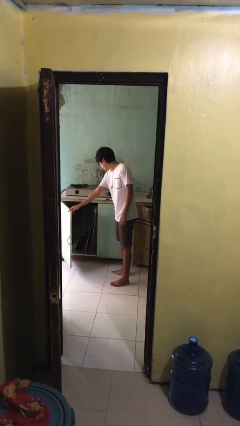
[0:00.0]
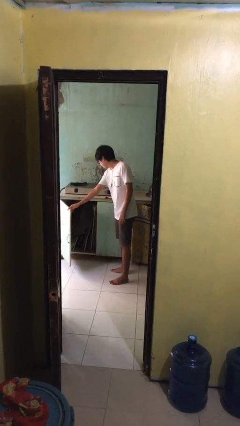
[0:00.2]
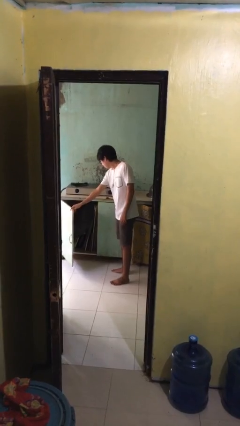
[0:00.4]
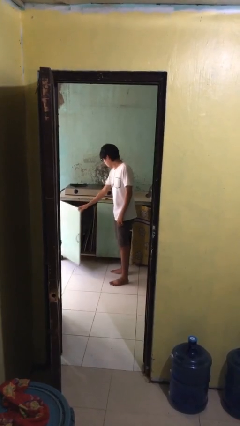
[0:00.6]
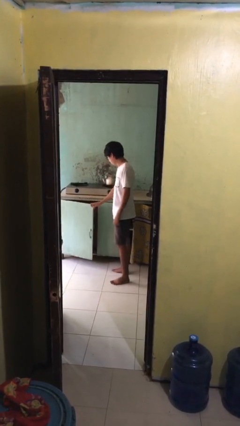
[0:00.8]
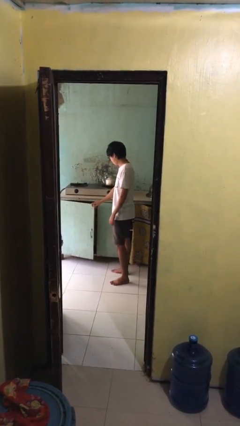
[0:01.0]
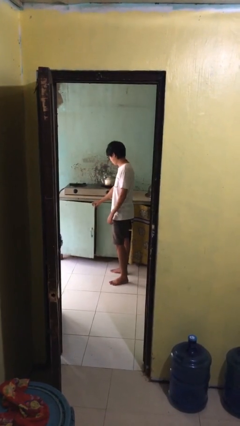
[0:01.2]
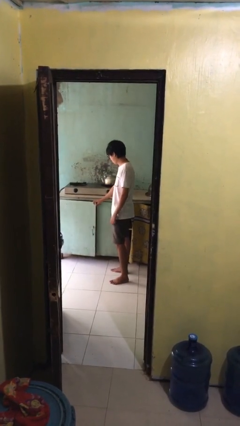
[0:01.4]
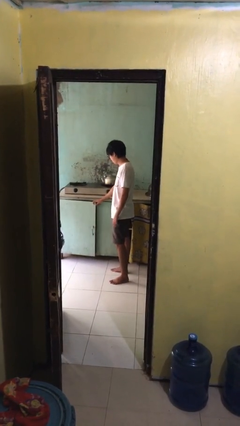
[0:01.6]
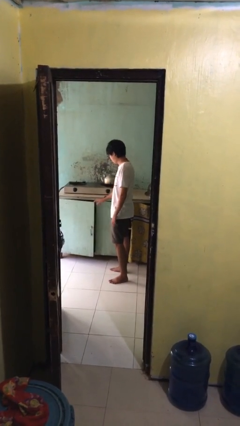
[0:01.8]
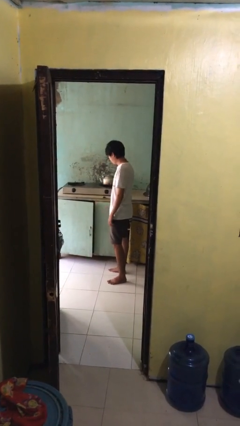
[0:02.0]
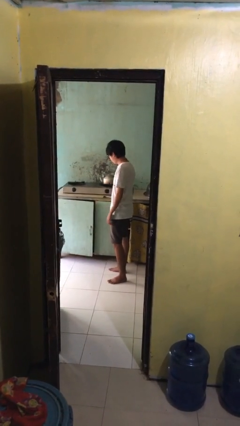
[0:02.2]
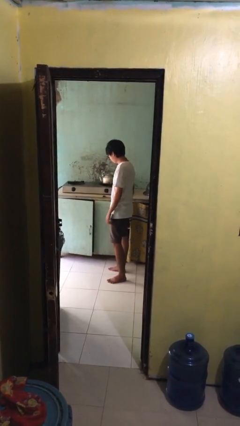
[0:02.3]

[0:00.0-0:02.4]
person closes cabinet

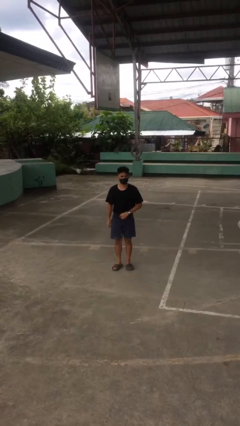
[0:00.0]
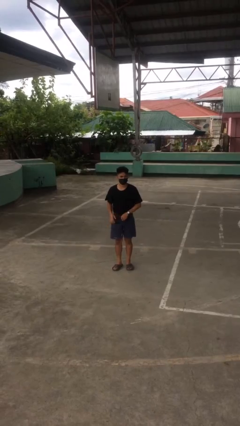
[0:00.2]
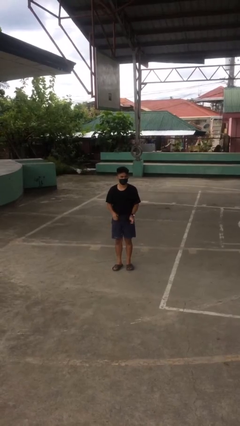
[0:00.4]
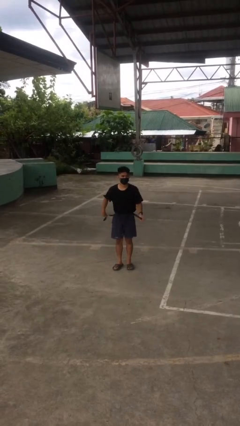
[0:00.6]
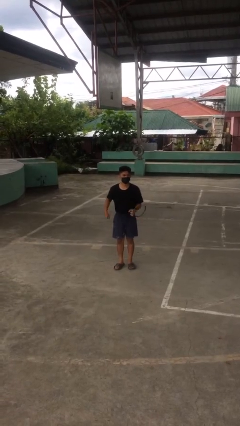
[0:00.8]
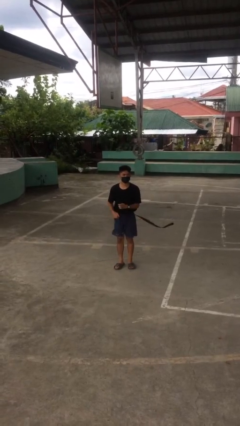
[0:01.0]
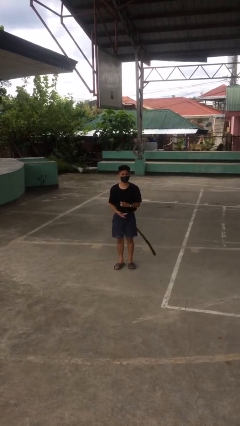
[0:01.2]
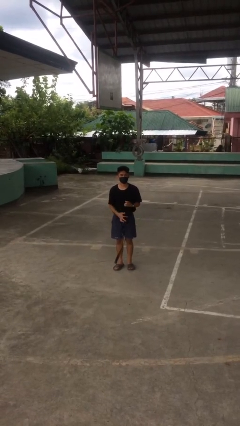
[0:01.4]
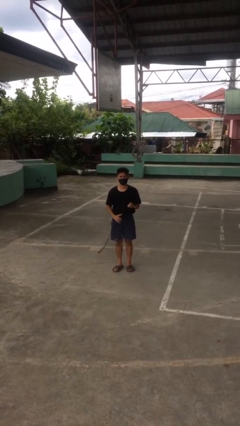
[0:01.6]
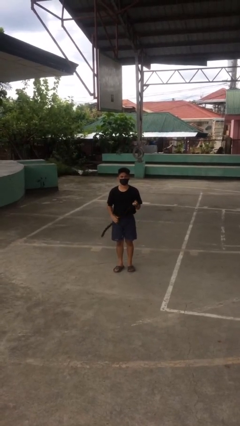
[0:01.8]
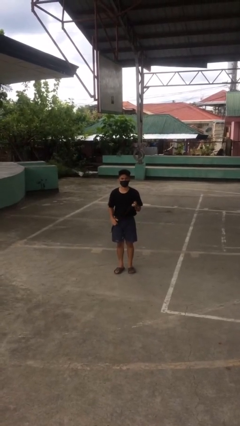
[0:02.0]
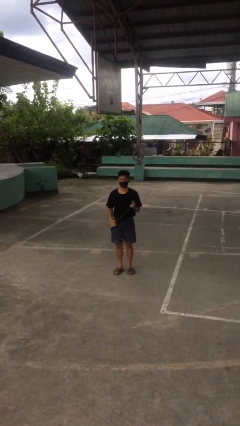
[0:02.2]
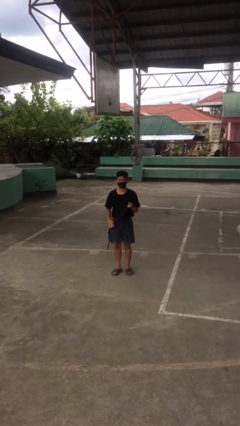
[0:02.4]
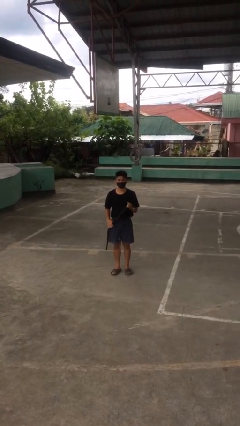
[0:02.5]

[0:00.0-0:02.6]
person takes off belt

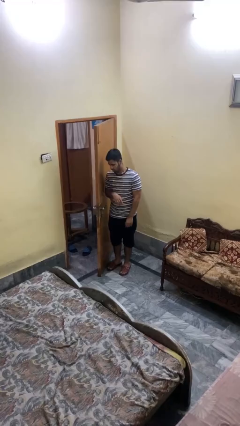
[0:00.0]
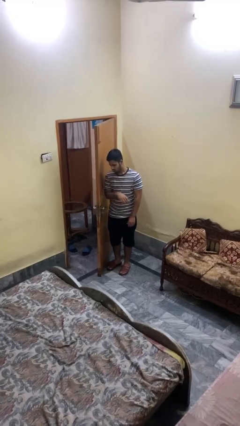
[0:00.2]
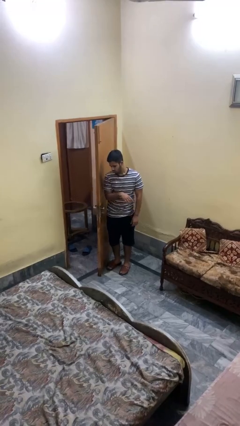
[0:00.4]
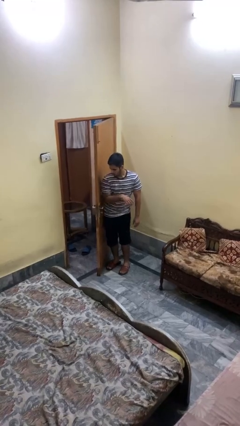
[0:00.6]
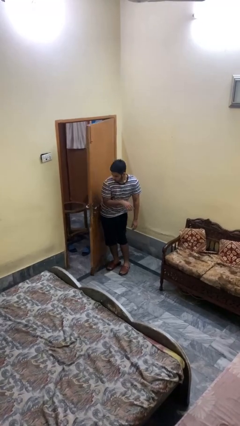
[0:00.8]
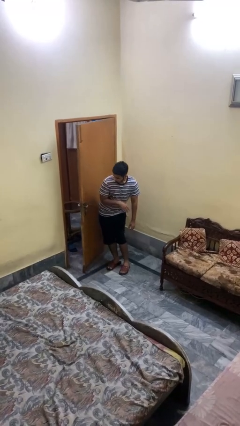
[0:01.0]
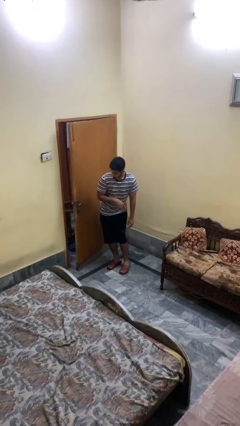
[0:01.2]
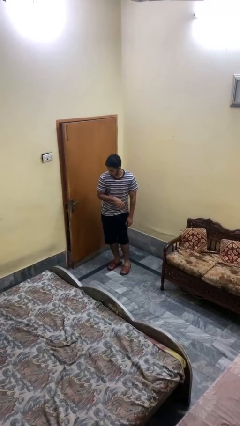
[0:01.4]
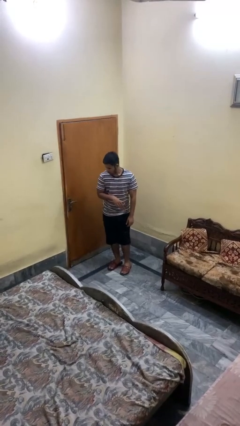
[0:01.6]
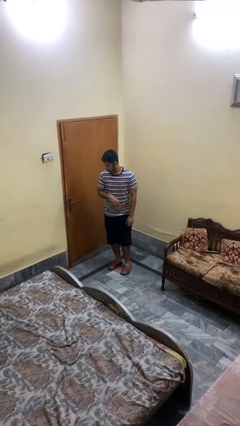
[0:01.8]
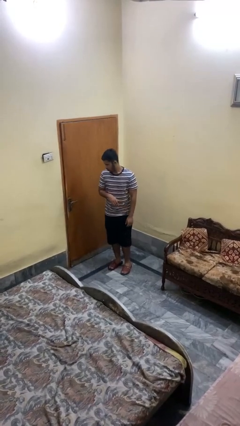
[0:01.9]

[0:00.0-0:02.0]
person closes door with hip

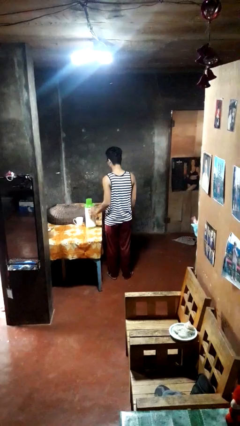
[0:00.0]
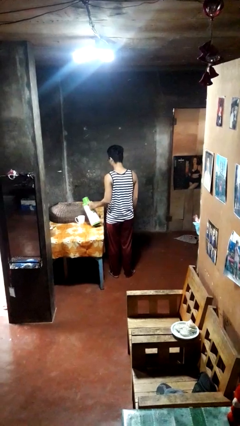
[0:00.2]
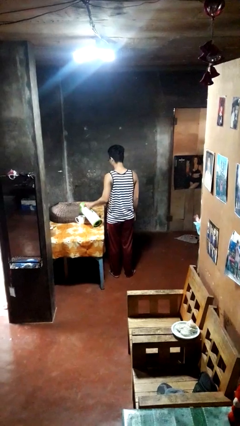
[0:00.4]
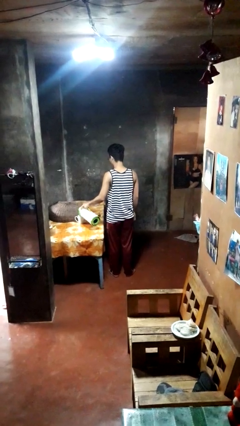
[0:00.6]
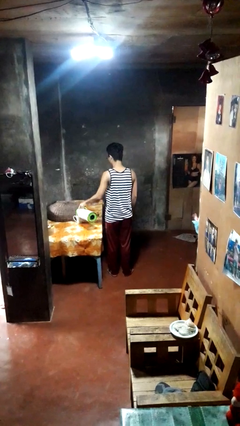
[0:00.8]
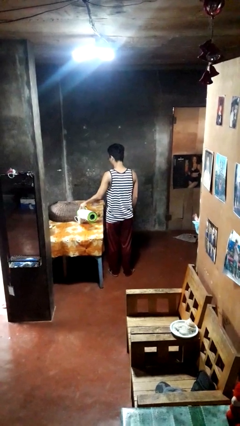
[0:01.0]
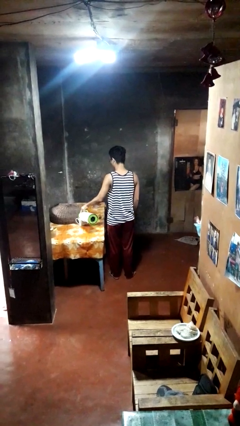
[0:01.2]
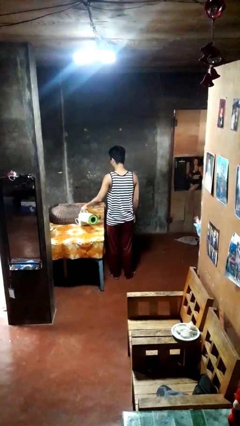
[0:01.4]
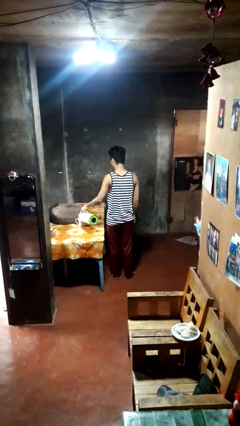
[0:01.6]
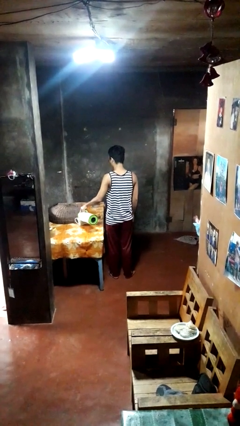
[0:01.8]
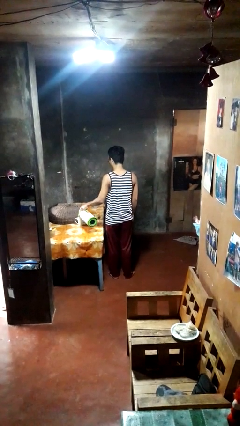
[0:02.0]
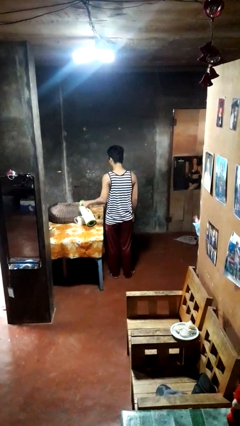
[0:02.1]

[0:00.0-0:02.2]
person pours coffee into mug

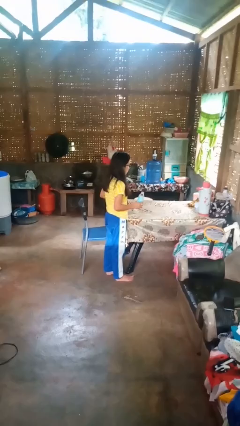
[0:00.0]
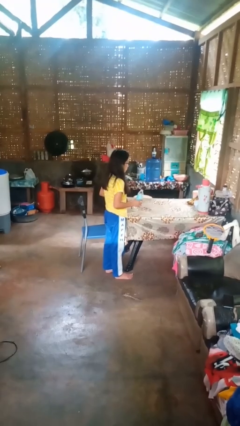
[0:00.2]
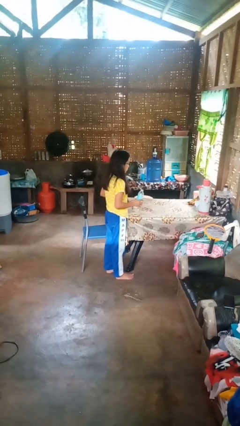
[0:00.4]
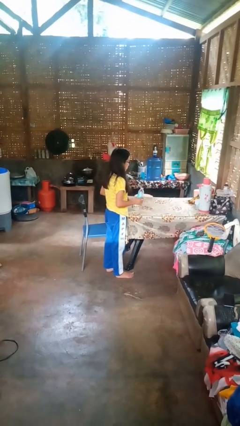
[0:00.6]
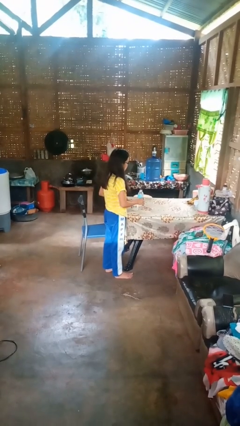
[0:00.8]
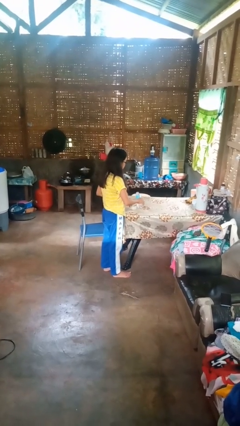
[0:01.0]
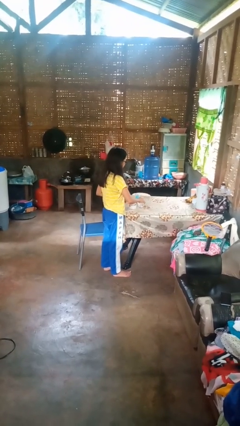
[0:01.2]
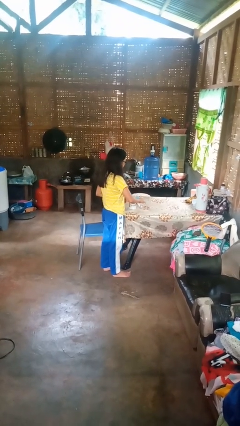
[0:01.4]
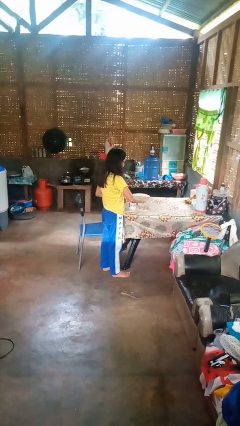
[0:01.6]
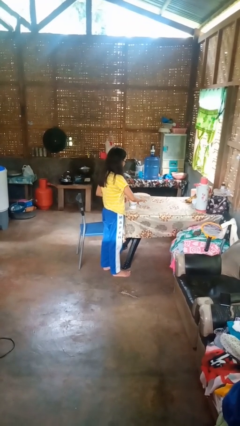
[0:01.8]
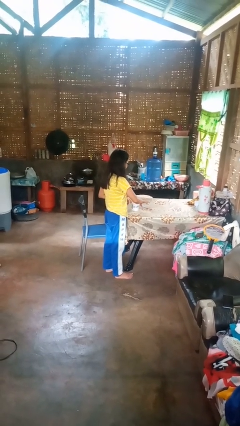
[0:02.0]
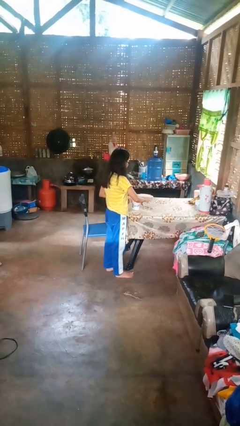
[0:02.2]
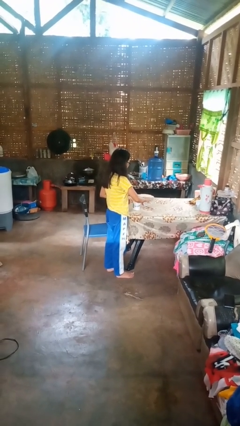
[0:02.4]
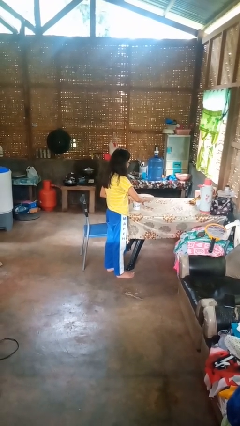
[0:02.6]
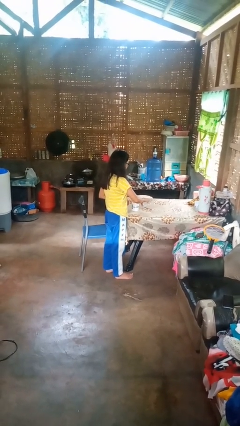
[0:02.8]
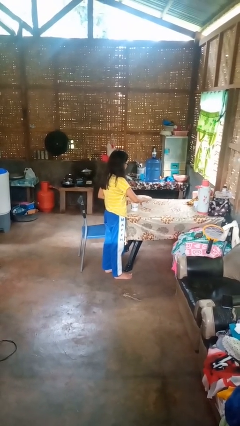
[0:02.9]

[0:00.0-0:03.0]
person pours liquid into cup

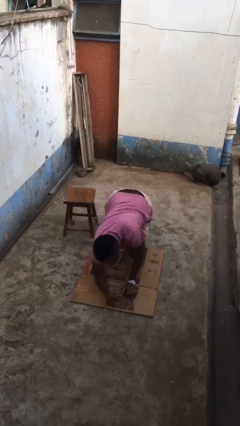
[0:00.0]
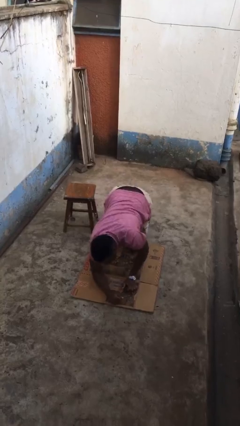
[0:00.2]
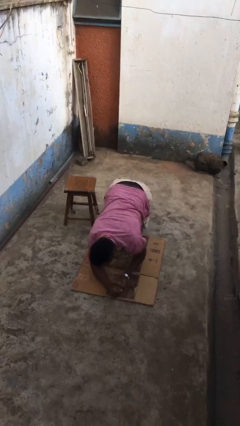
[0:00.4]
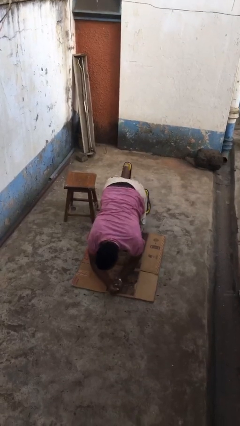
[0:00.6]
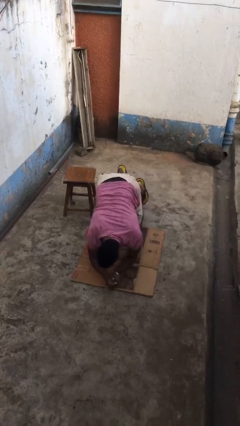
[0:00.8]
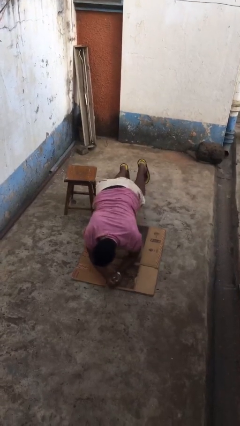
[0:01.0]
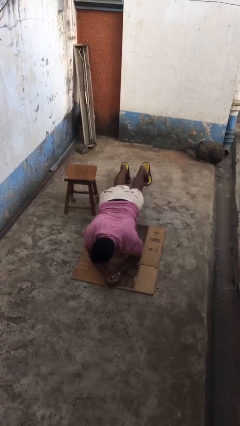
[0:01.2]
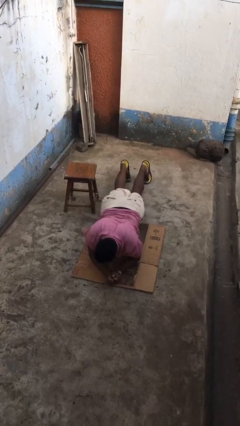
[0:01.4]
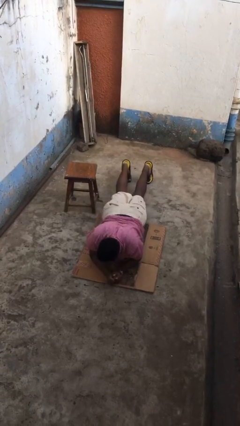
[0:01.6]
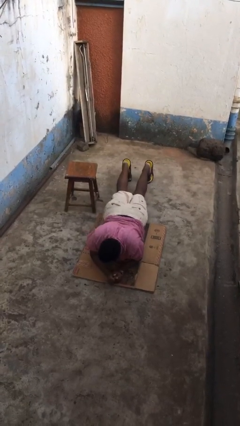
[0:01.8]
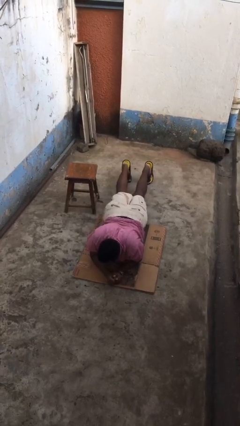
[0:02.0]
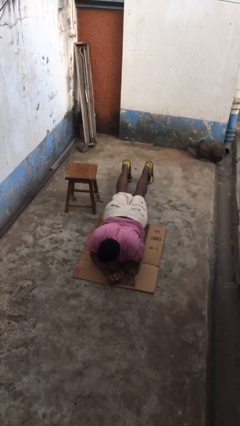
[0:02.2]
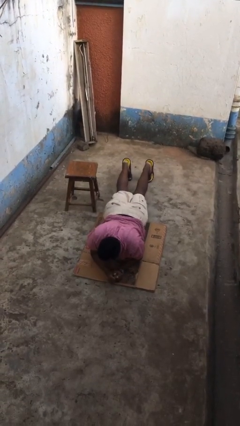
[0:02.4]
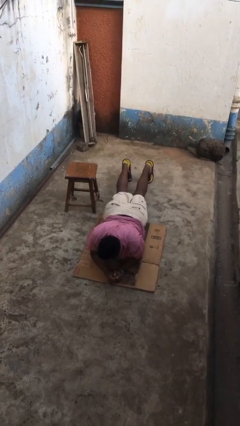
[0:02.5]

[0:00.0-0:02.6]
person lies down on floor

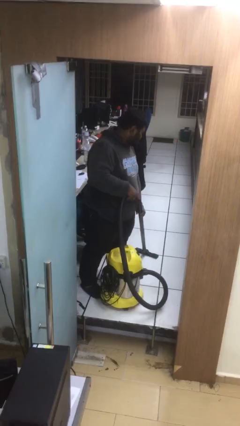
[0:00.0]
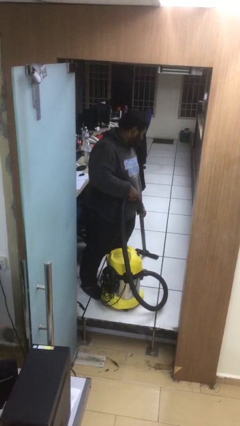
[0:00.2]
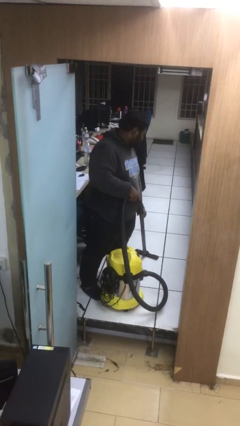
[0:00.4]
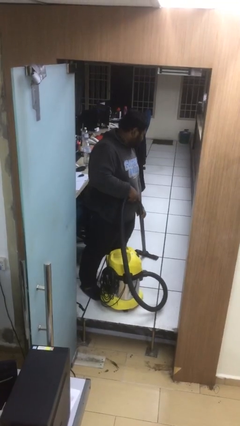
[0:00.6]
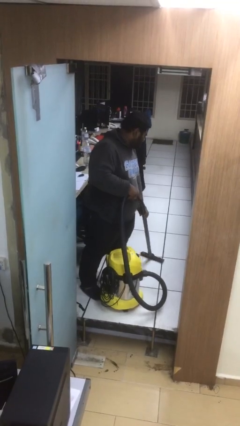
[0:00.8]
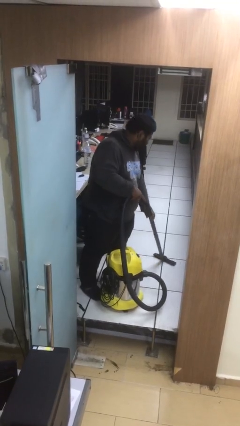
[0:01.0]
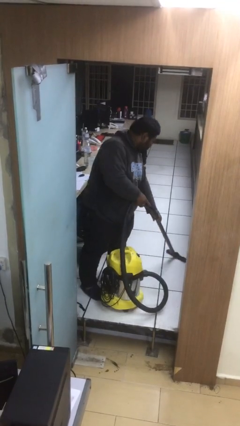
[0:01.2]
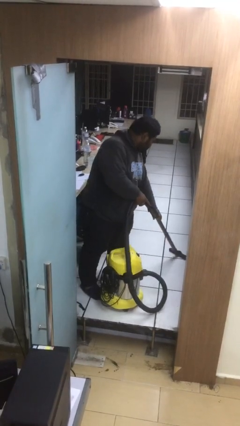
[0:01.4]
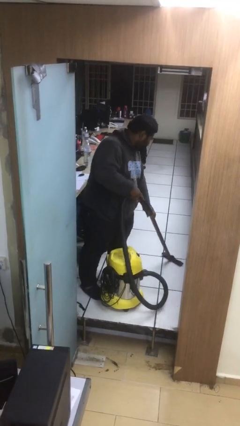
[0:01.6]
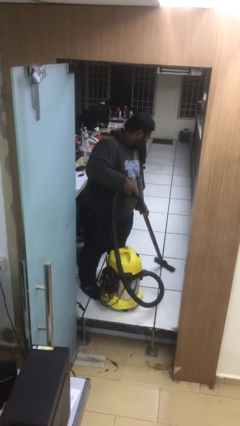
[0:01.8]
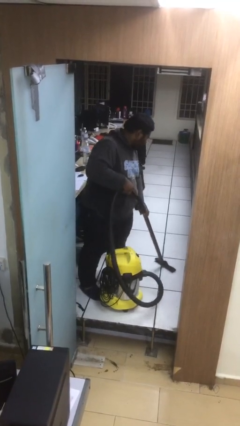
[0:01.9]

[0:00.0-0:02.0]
person vacuums carpet
